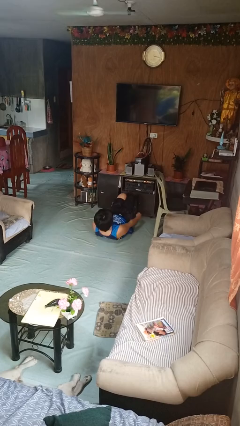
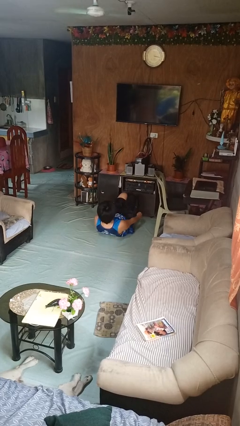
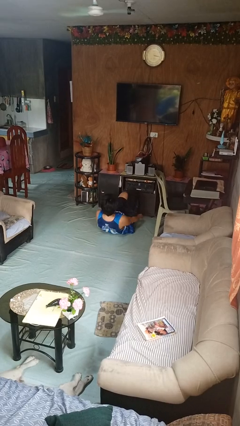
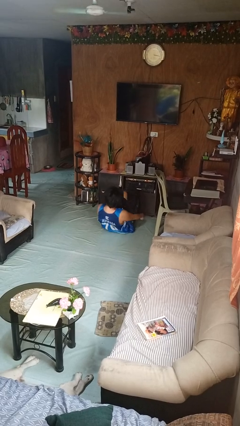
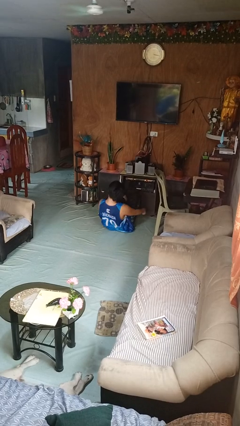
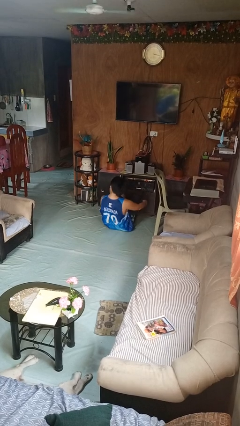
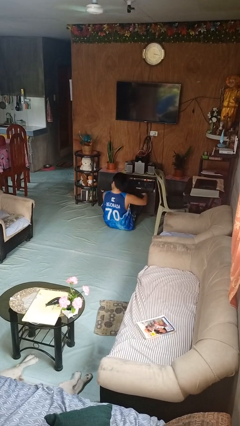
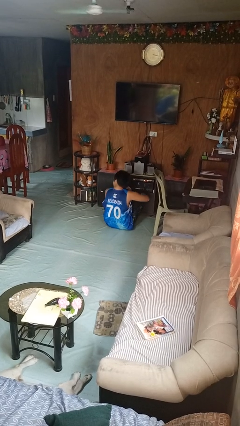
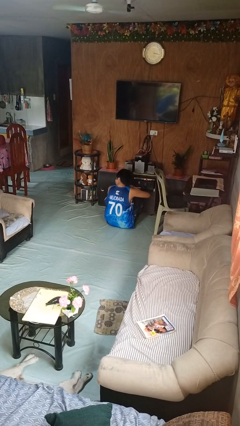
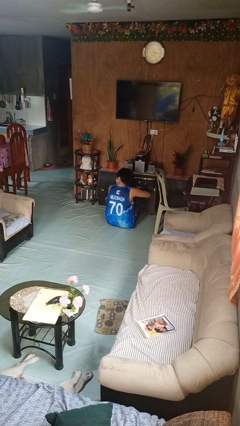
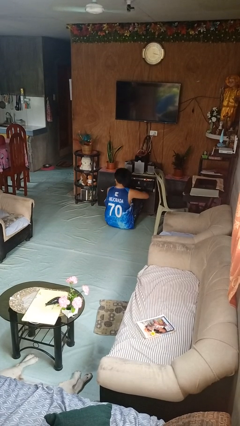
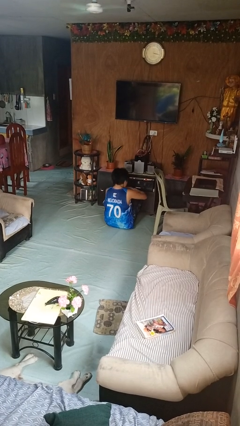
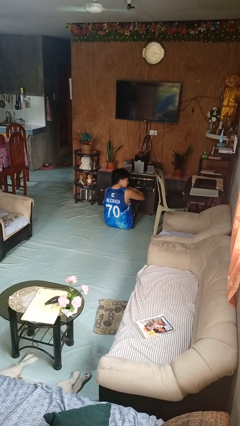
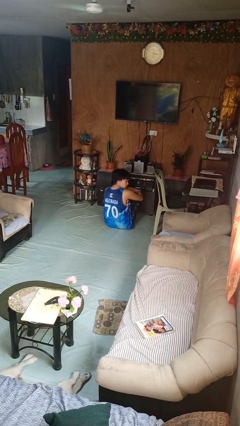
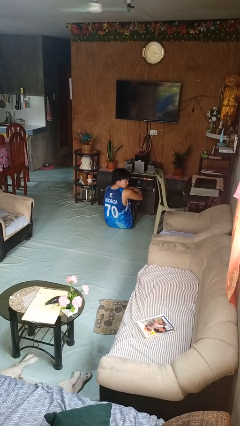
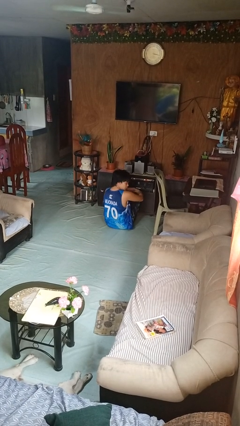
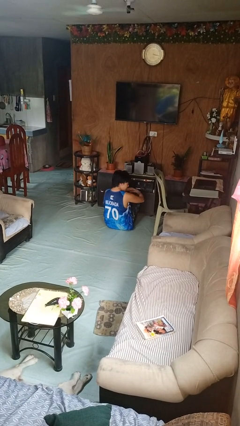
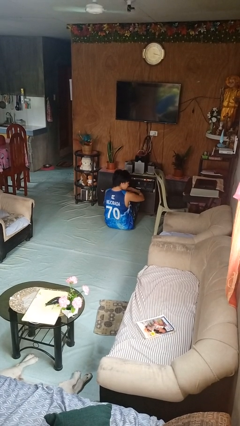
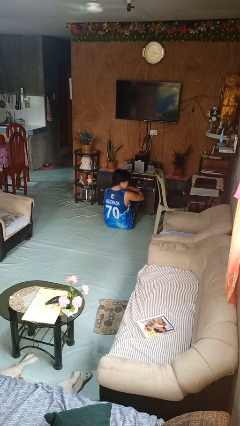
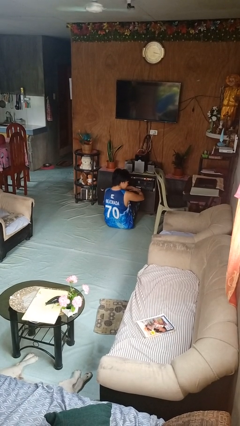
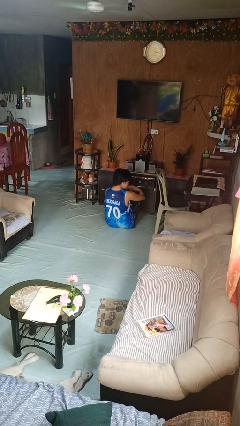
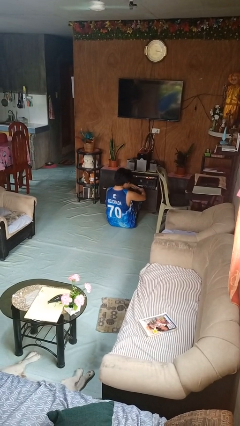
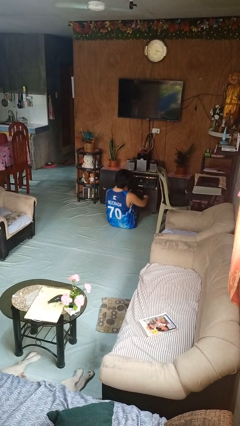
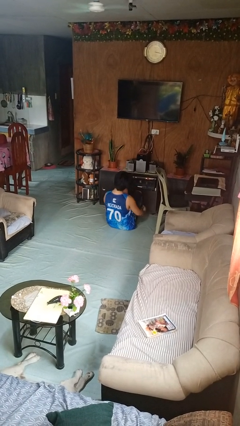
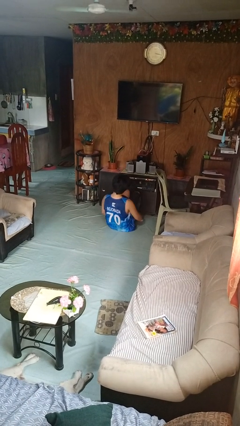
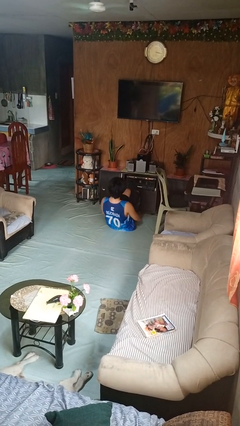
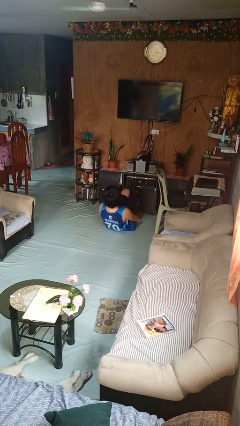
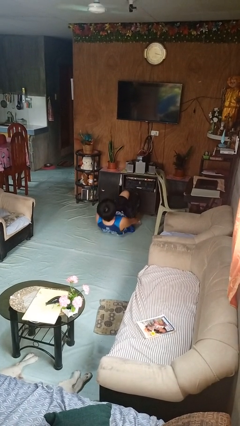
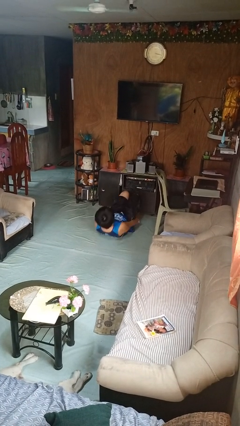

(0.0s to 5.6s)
person exercises with situp

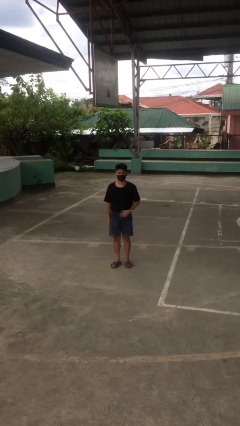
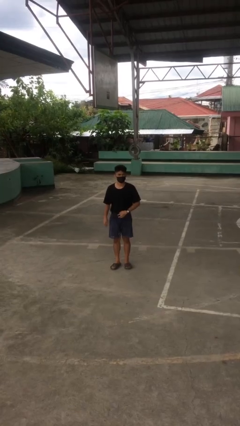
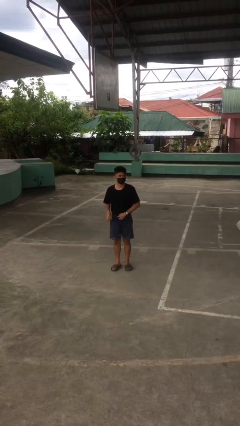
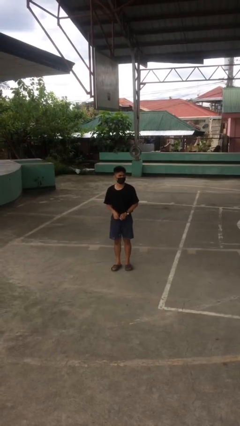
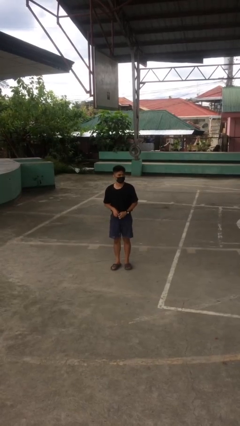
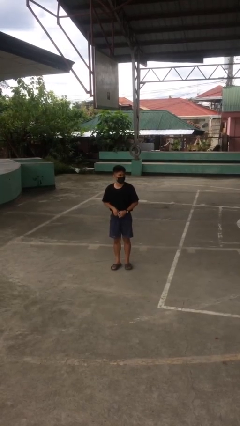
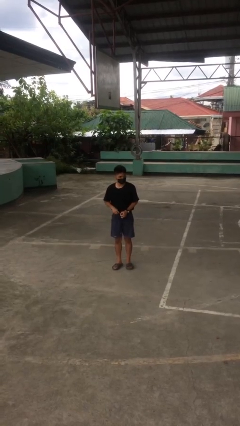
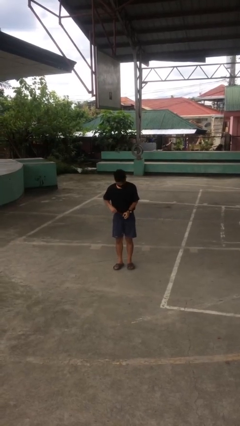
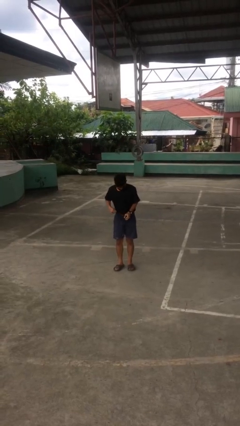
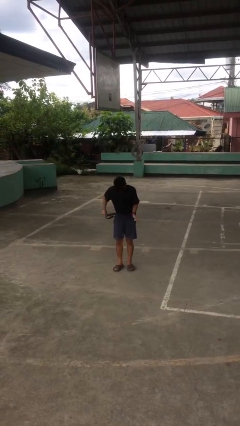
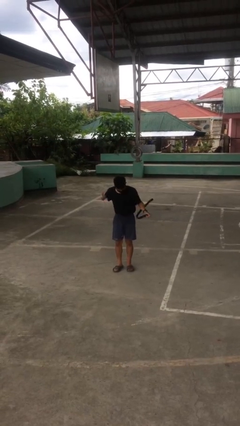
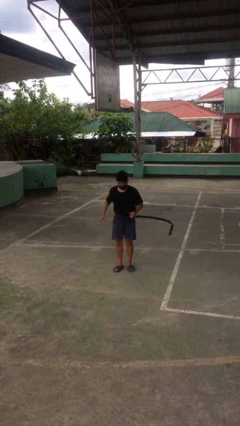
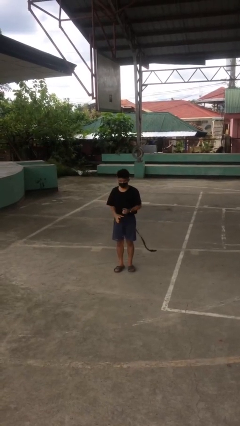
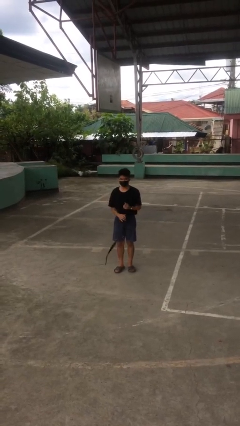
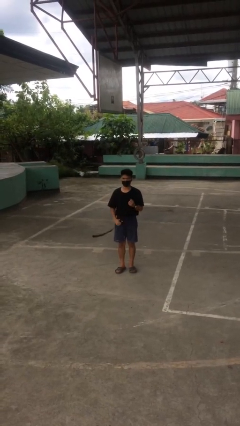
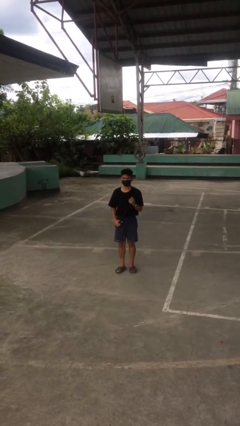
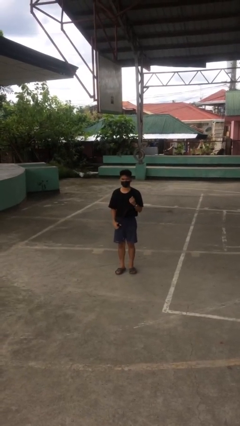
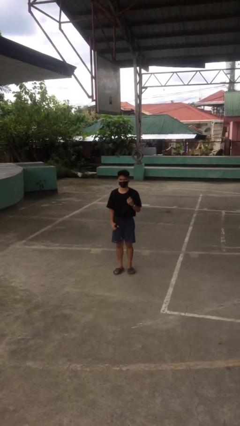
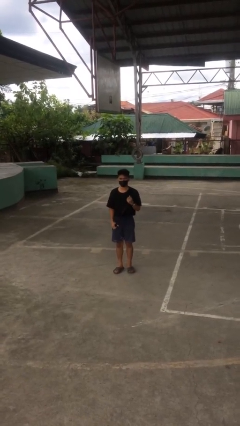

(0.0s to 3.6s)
person takes off belt

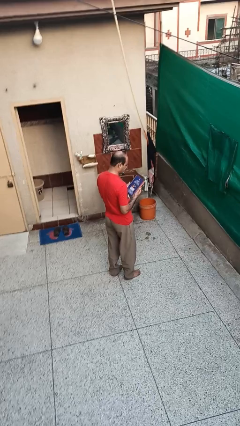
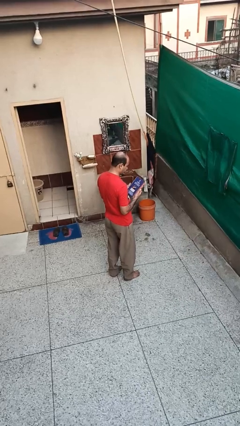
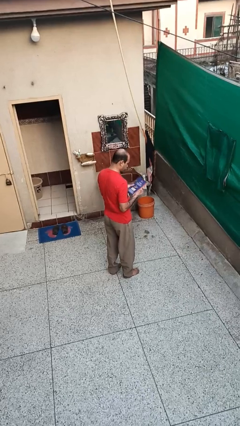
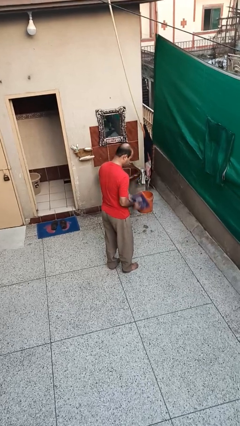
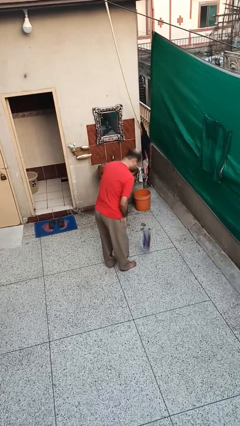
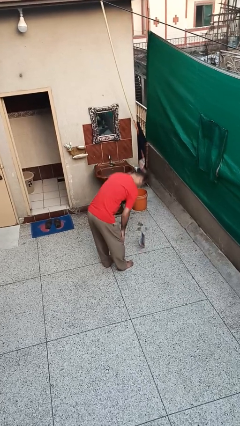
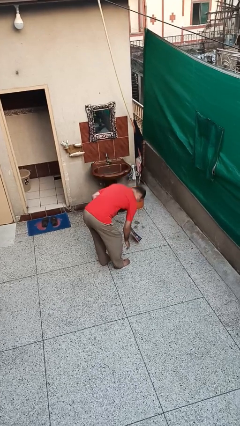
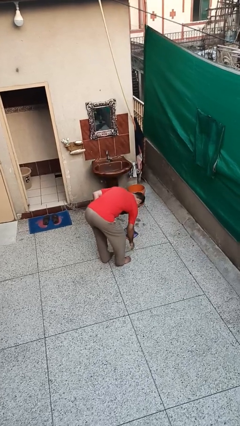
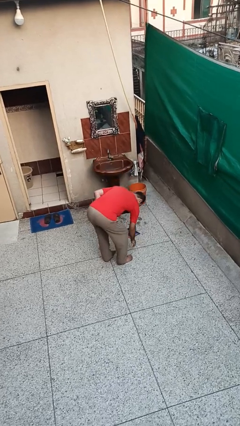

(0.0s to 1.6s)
person drops object

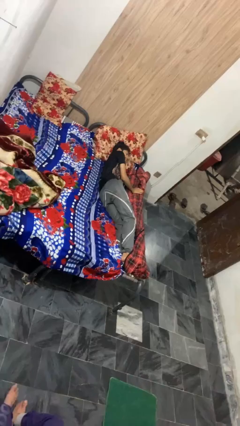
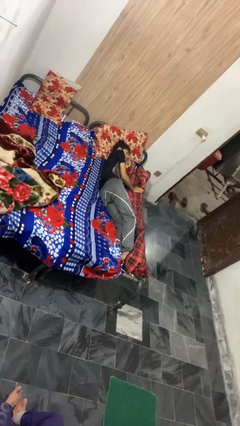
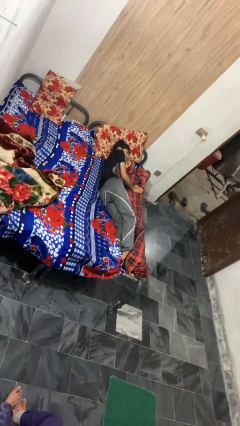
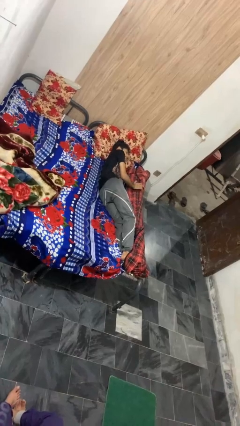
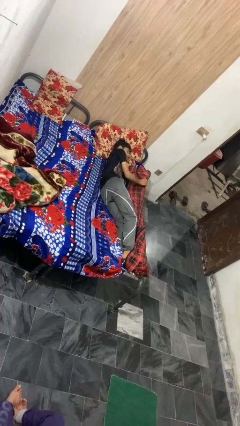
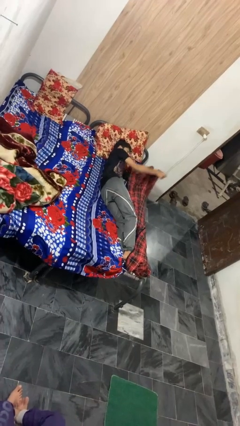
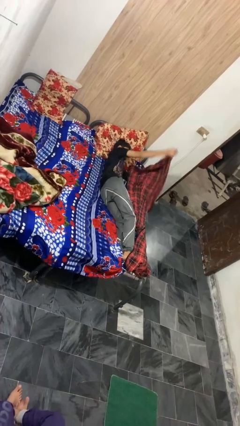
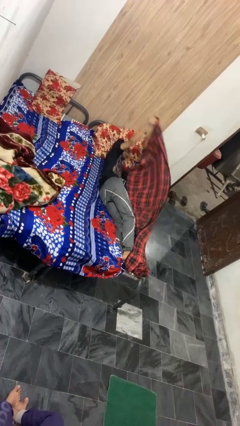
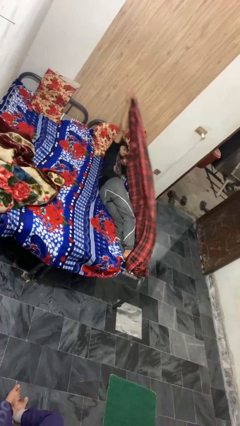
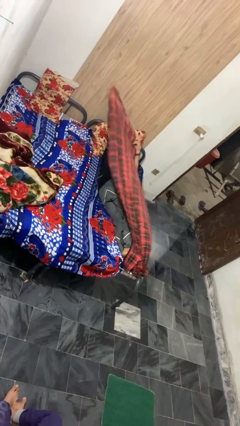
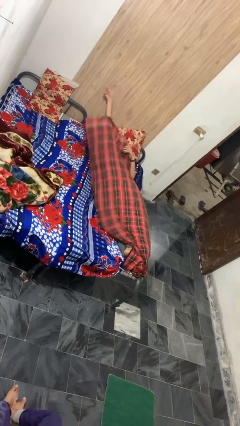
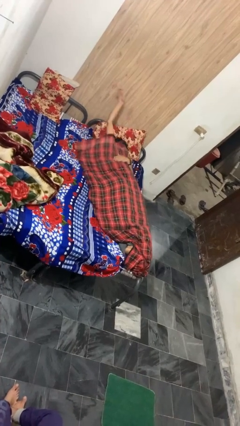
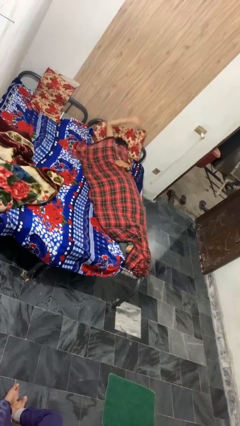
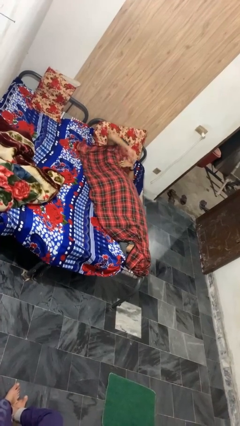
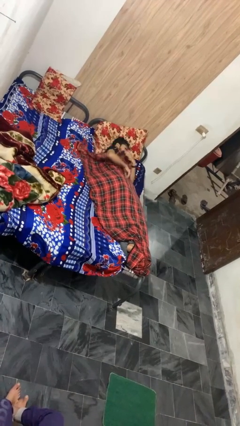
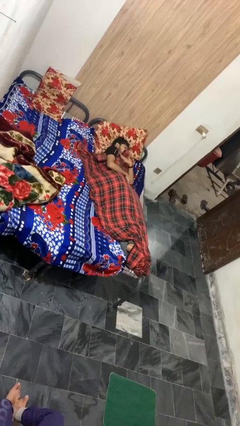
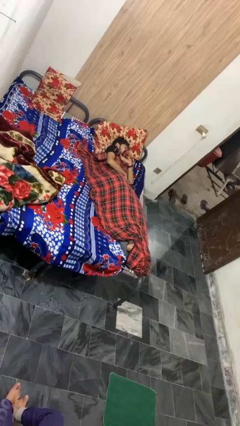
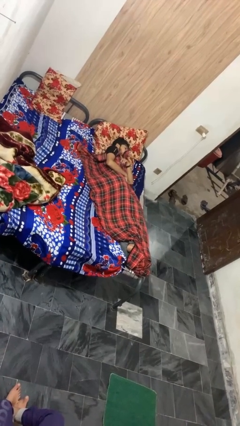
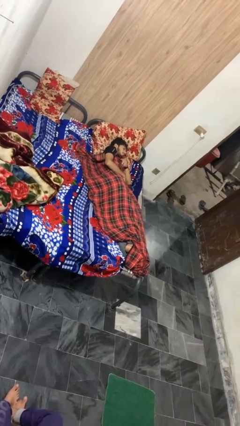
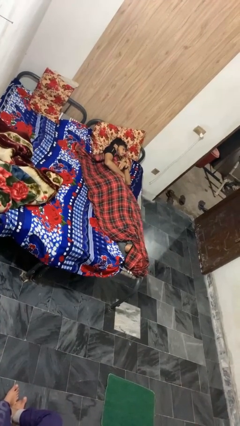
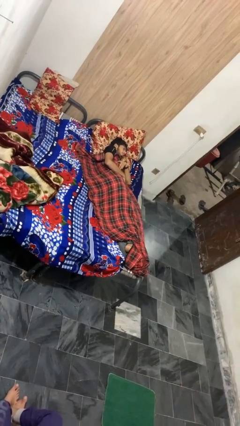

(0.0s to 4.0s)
person covers with blanket

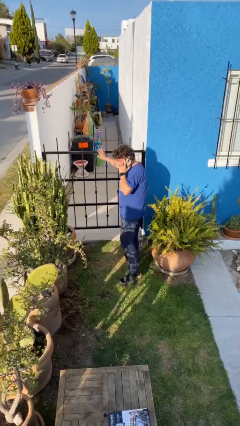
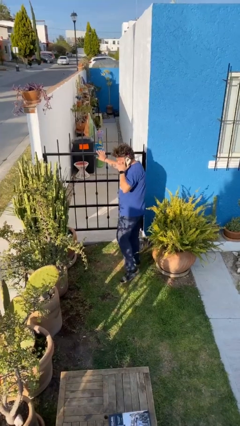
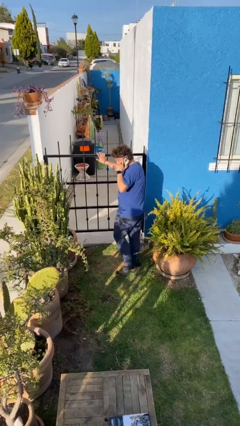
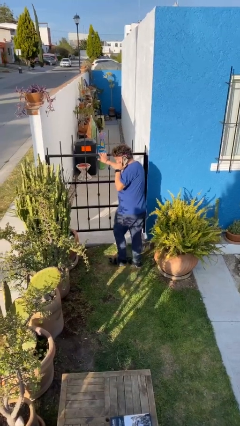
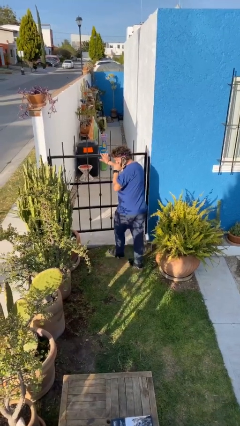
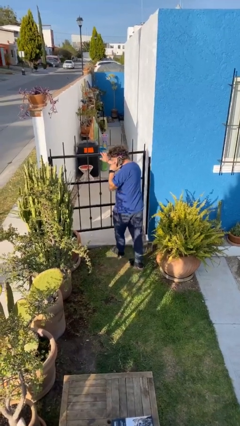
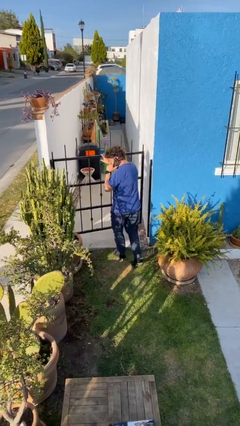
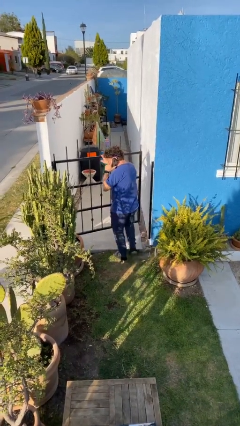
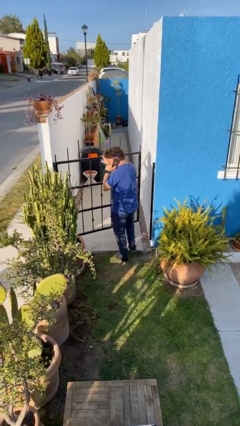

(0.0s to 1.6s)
person opens facility door

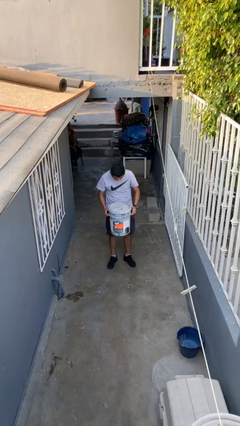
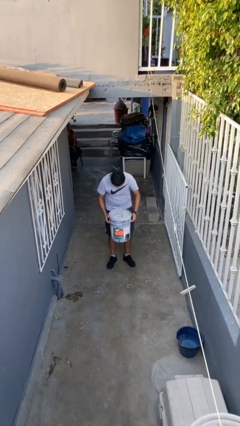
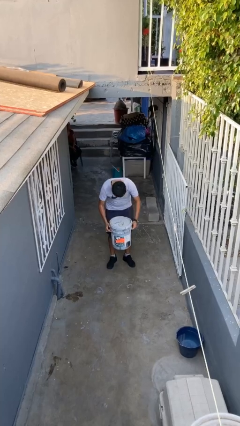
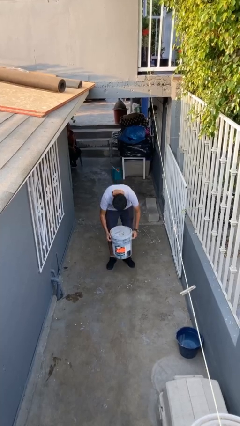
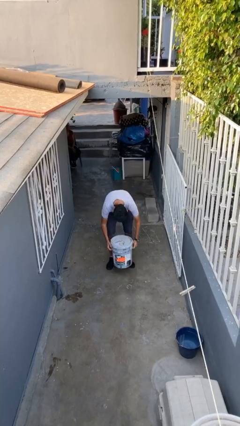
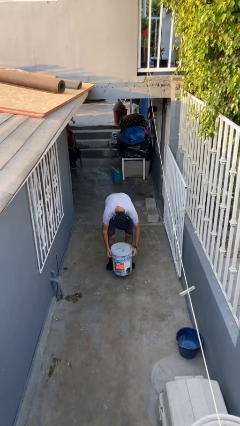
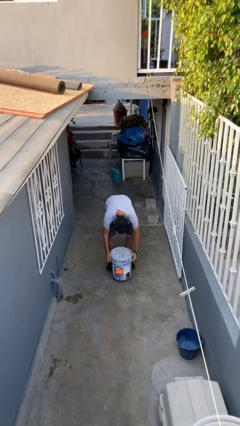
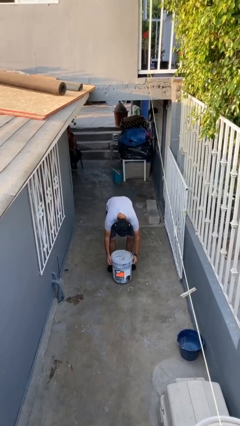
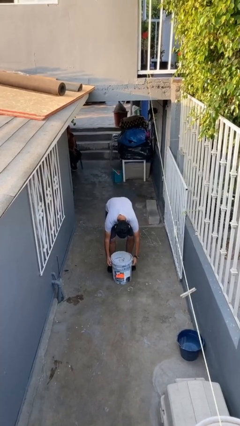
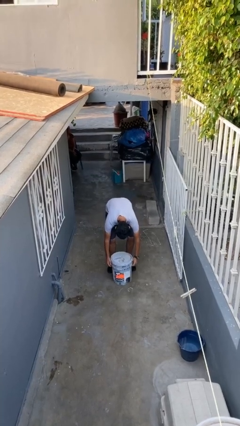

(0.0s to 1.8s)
person puts down object on floor
